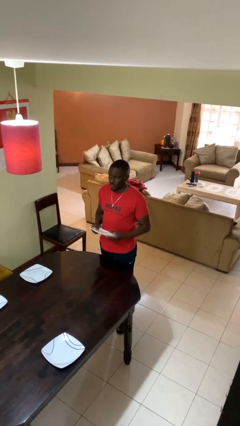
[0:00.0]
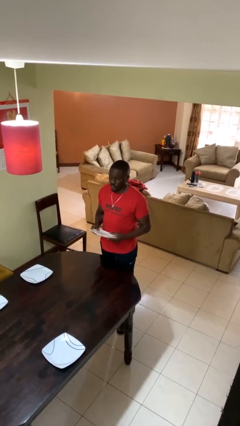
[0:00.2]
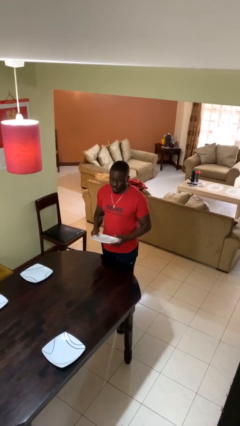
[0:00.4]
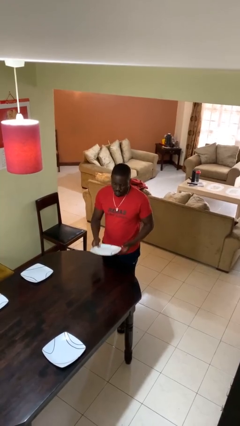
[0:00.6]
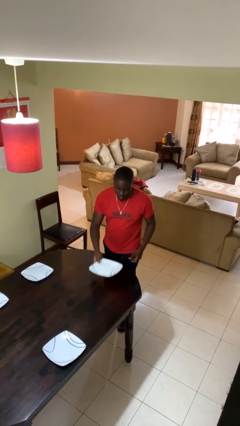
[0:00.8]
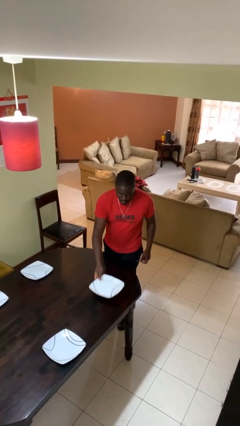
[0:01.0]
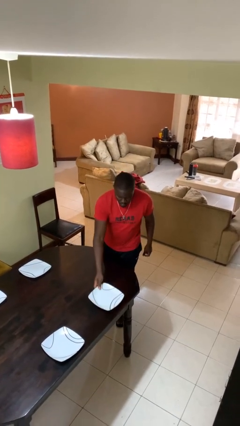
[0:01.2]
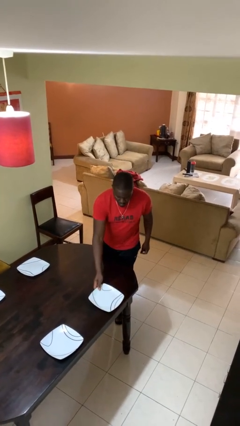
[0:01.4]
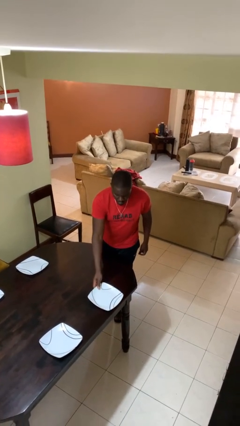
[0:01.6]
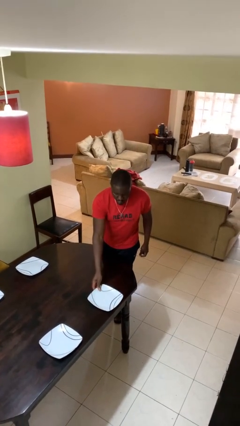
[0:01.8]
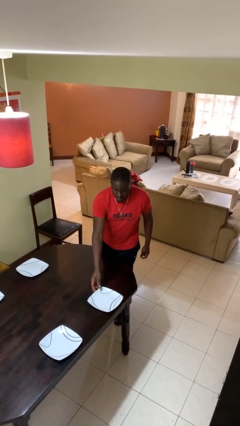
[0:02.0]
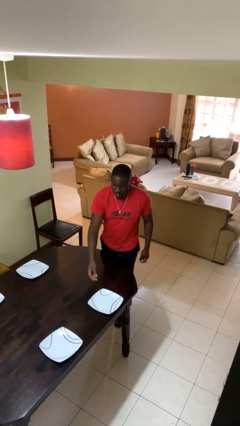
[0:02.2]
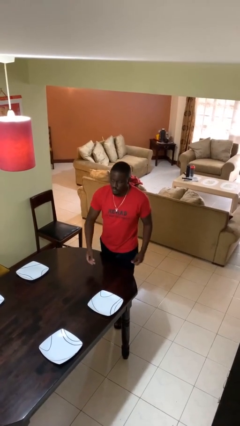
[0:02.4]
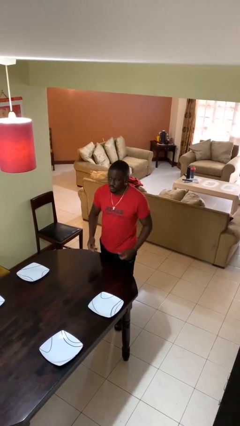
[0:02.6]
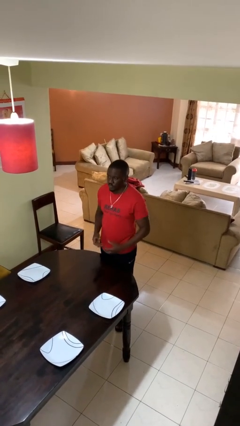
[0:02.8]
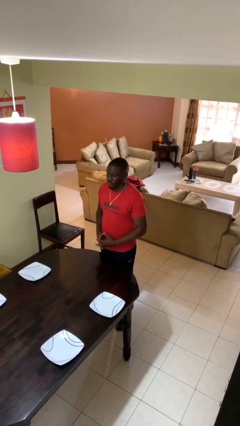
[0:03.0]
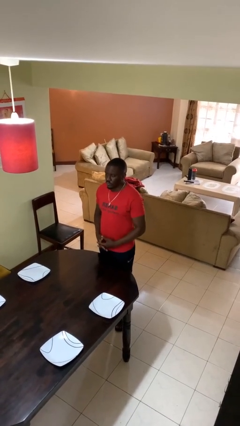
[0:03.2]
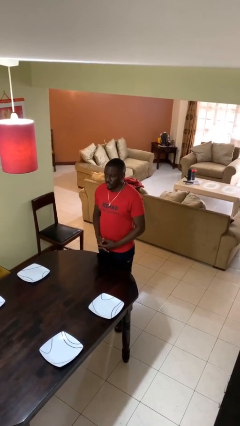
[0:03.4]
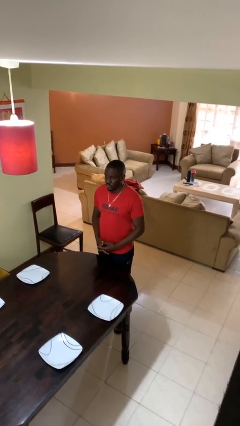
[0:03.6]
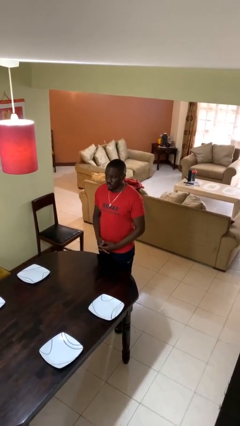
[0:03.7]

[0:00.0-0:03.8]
person sets table

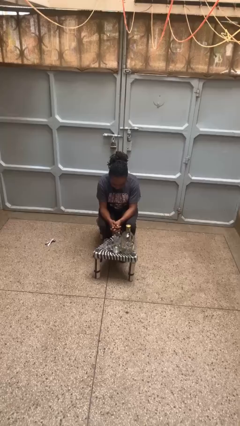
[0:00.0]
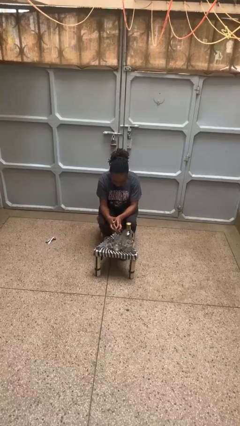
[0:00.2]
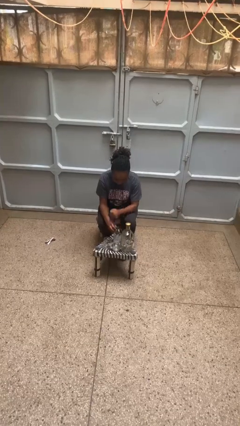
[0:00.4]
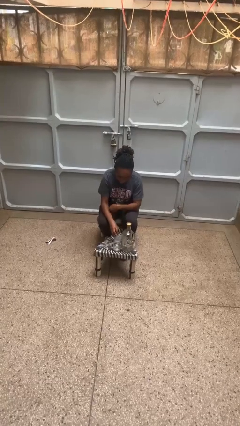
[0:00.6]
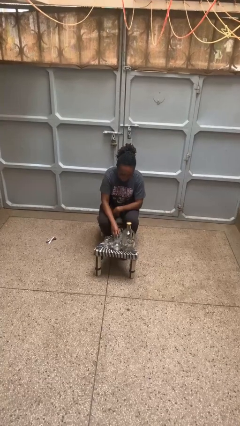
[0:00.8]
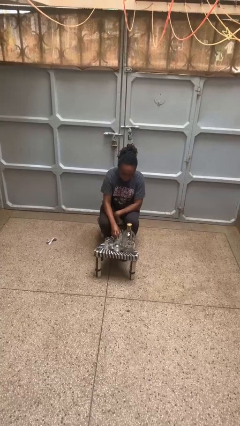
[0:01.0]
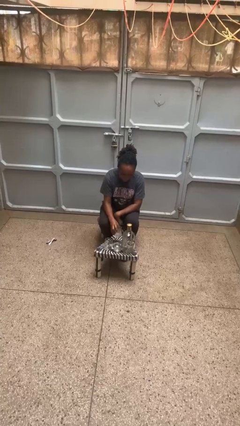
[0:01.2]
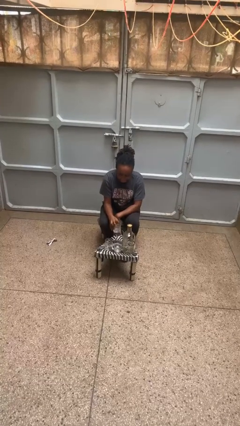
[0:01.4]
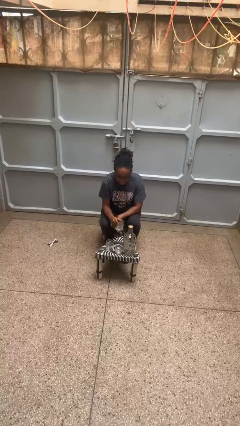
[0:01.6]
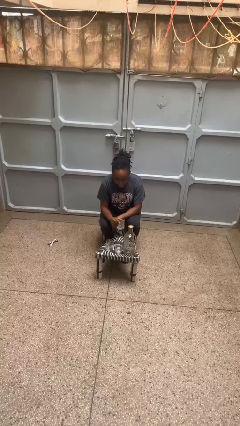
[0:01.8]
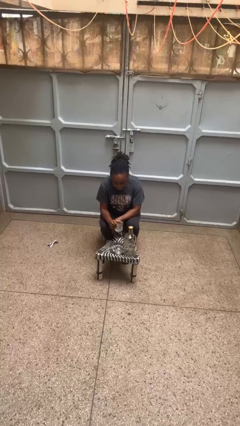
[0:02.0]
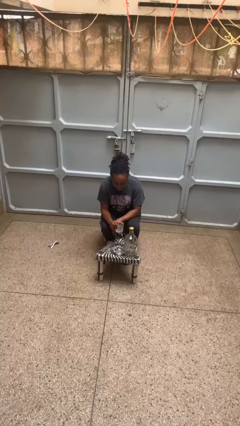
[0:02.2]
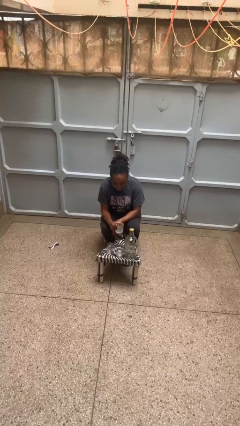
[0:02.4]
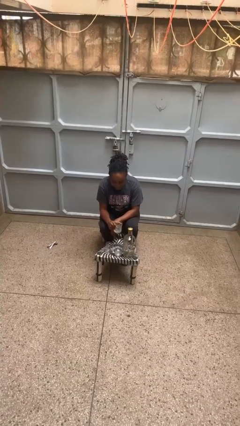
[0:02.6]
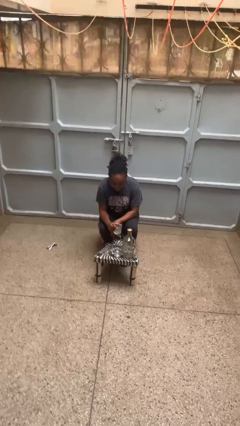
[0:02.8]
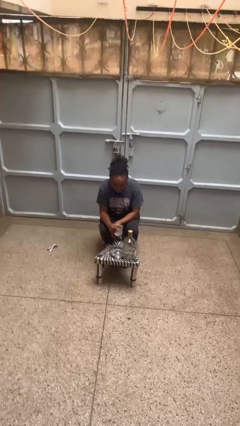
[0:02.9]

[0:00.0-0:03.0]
person picks up object from table

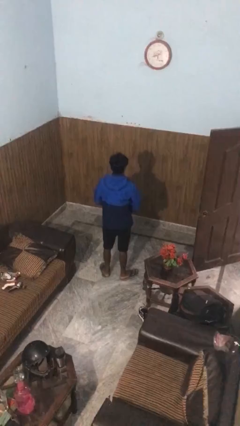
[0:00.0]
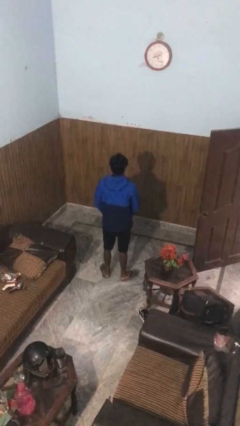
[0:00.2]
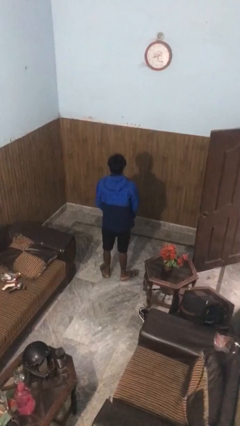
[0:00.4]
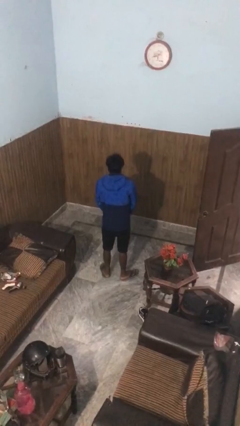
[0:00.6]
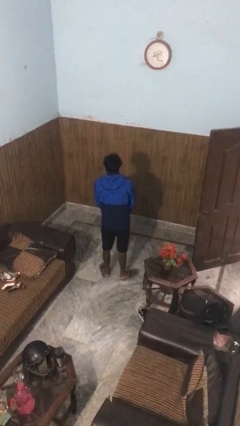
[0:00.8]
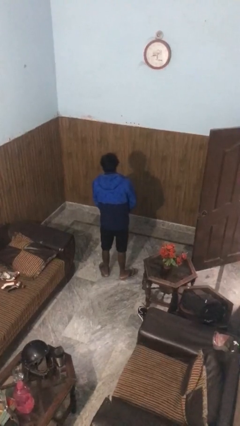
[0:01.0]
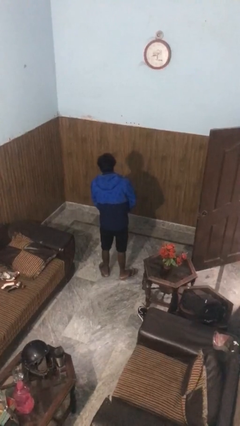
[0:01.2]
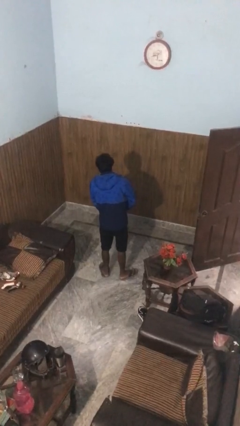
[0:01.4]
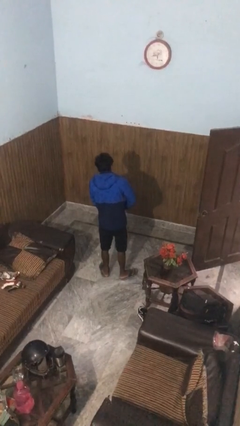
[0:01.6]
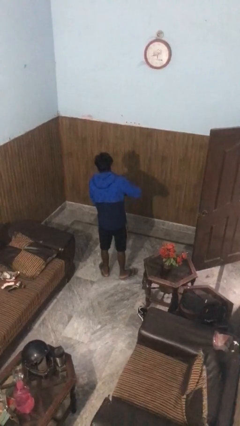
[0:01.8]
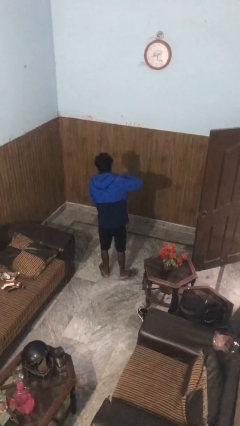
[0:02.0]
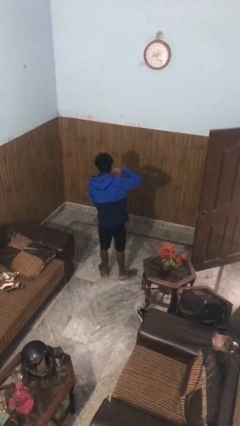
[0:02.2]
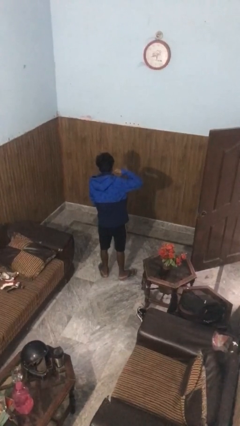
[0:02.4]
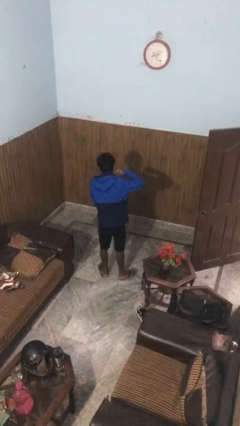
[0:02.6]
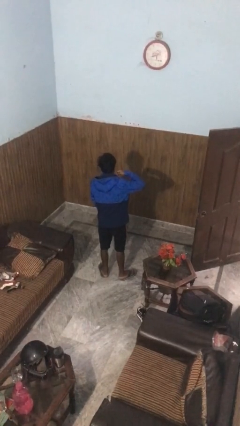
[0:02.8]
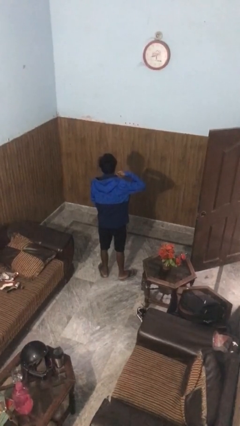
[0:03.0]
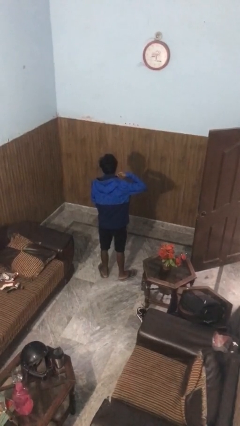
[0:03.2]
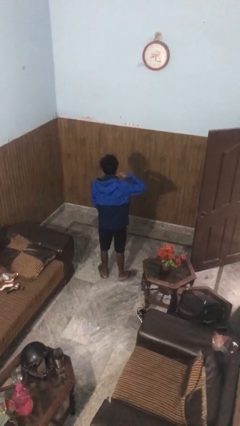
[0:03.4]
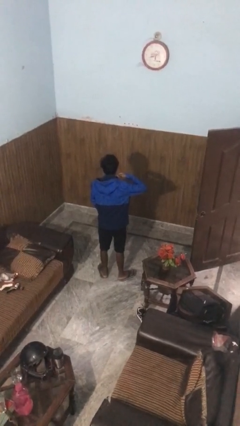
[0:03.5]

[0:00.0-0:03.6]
person zips up jacket

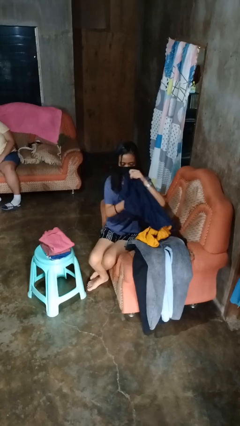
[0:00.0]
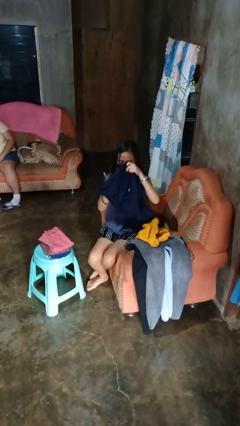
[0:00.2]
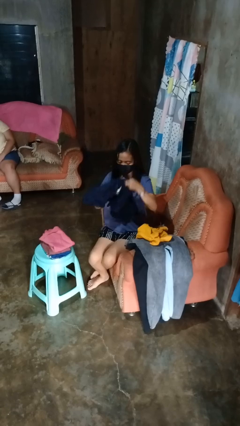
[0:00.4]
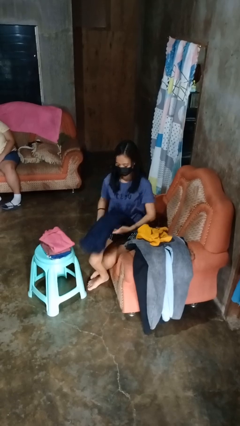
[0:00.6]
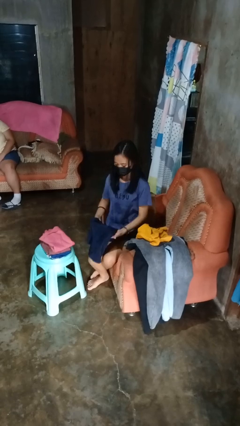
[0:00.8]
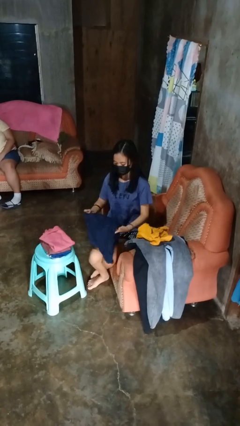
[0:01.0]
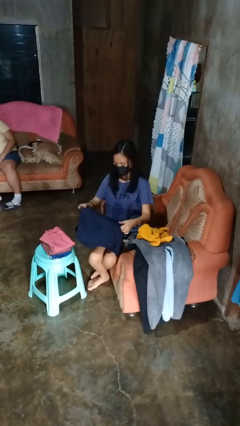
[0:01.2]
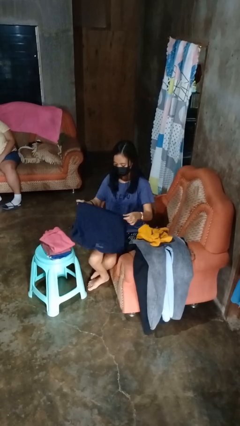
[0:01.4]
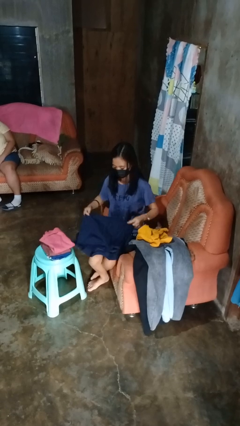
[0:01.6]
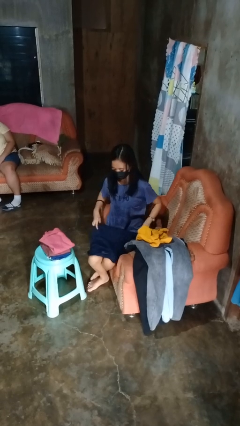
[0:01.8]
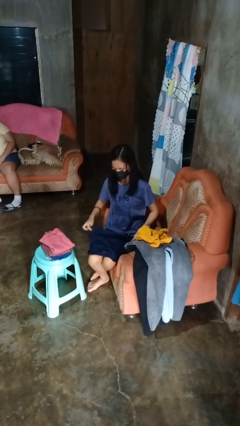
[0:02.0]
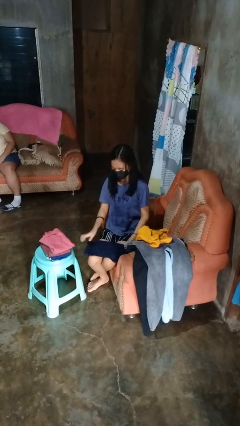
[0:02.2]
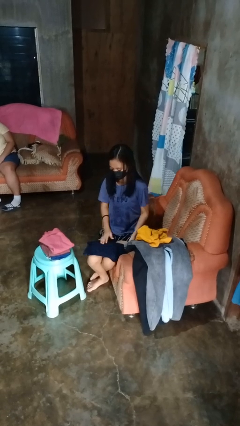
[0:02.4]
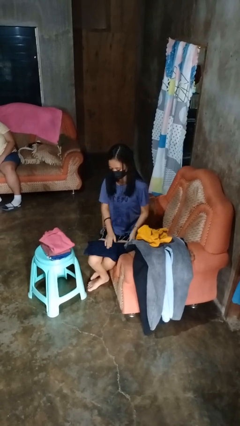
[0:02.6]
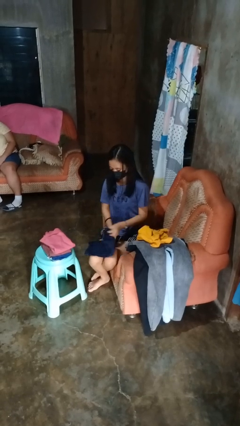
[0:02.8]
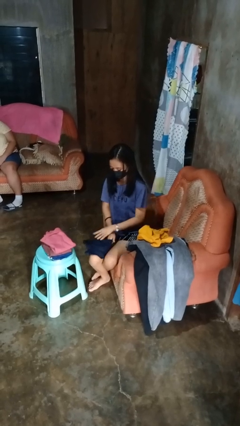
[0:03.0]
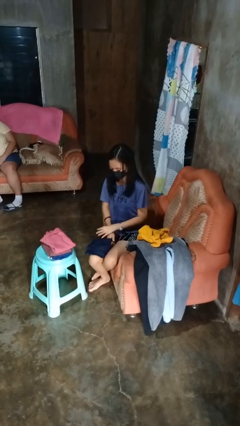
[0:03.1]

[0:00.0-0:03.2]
person folds shirt

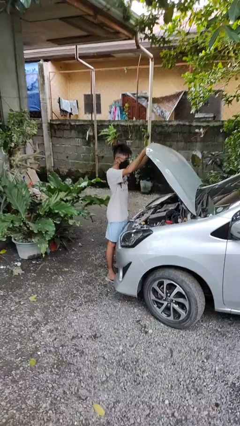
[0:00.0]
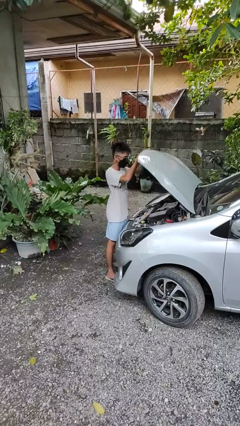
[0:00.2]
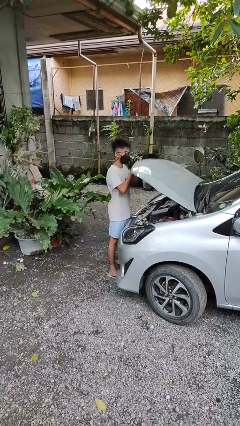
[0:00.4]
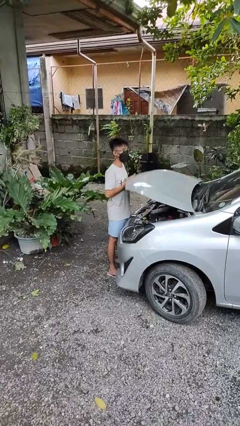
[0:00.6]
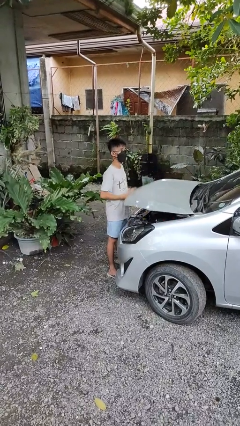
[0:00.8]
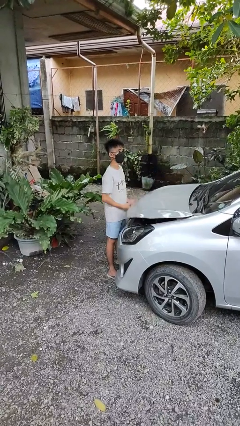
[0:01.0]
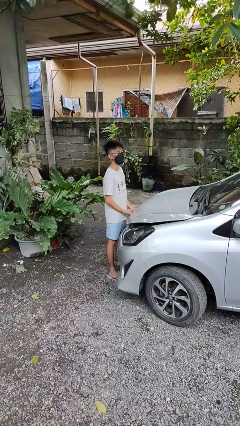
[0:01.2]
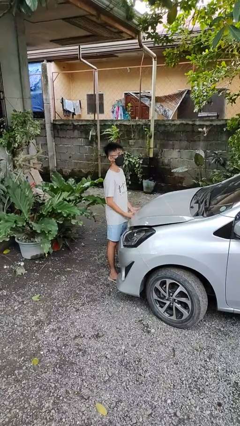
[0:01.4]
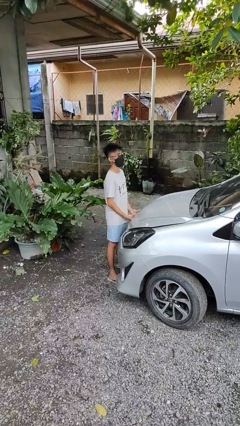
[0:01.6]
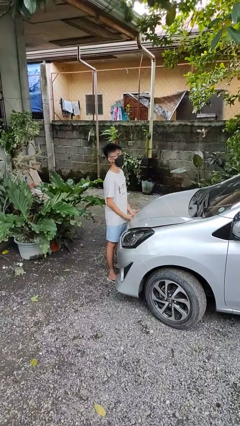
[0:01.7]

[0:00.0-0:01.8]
person closes car hood

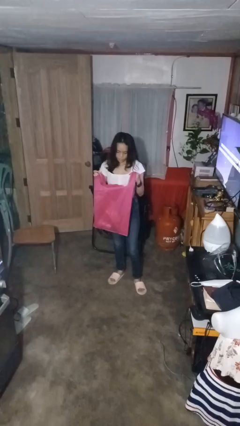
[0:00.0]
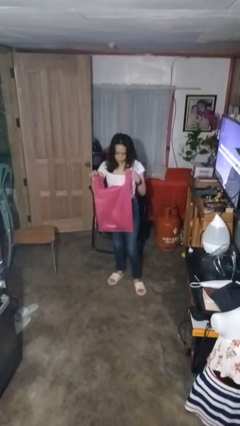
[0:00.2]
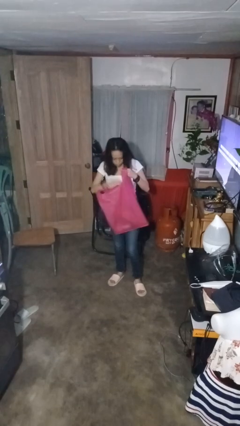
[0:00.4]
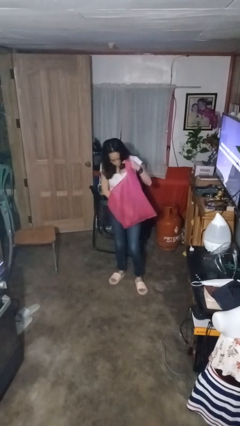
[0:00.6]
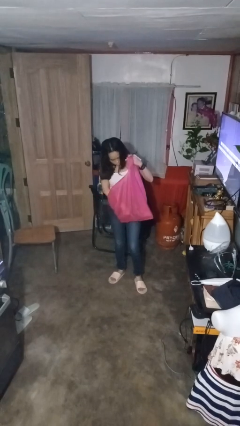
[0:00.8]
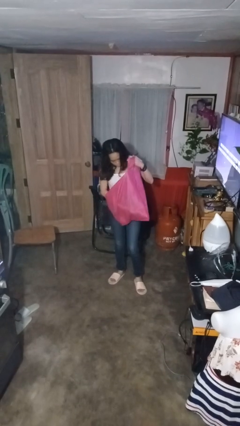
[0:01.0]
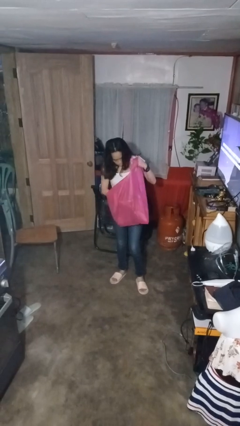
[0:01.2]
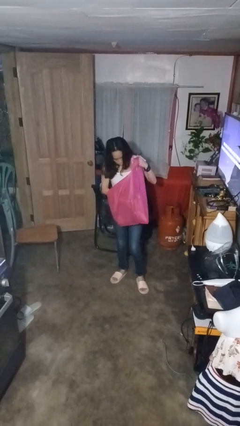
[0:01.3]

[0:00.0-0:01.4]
person searches in bag

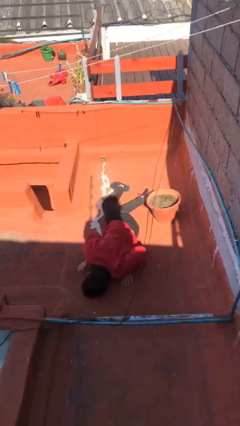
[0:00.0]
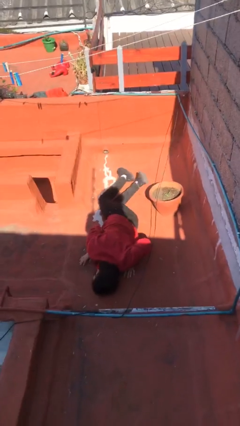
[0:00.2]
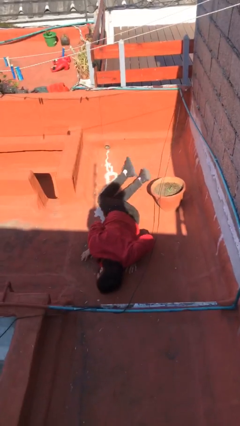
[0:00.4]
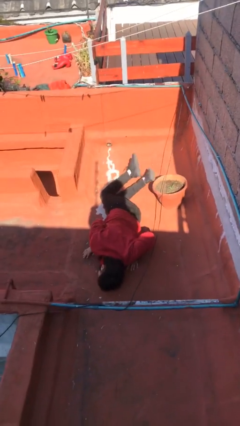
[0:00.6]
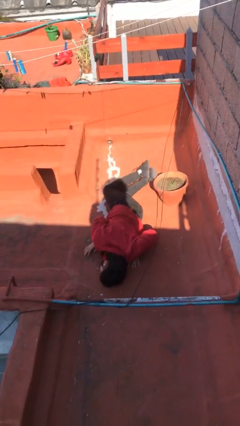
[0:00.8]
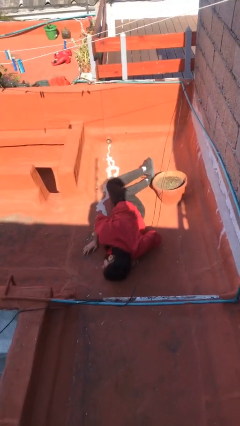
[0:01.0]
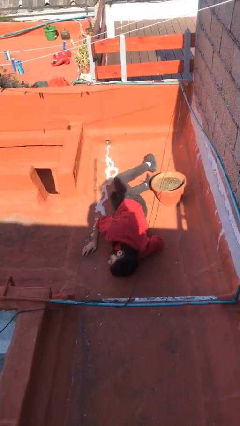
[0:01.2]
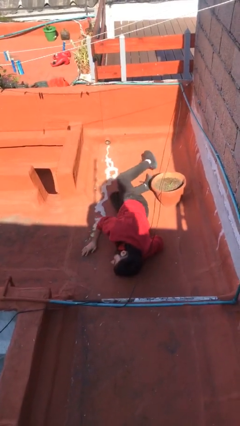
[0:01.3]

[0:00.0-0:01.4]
person lies down on floor
